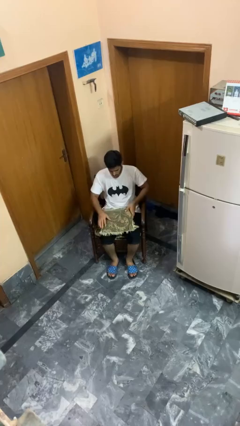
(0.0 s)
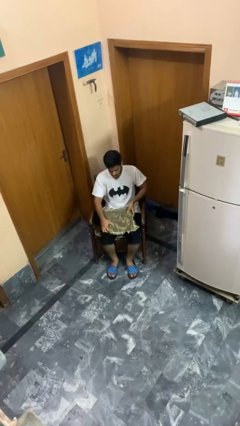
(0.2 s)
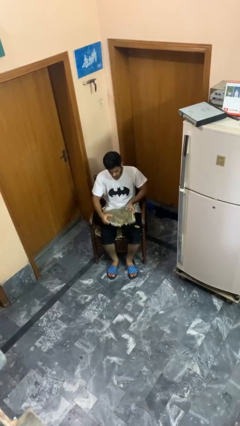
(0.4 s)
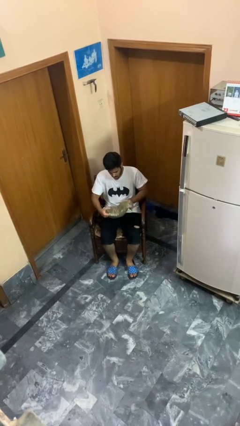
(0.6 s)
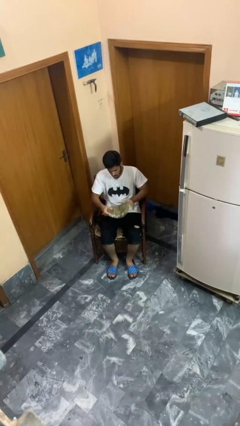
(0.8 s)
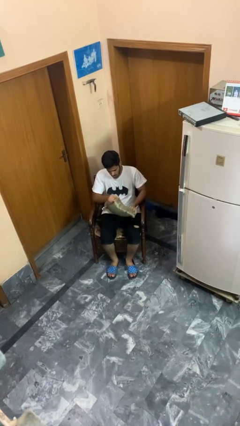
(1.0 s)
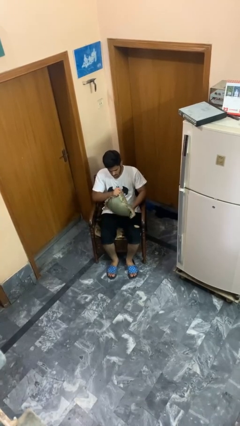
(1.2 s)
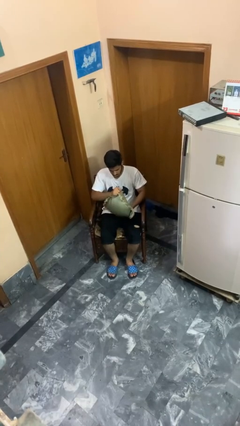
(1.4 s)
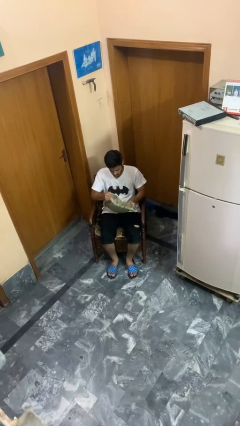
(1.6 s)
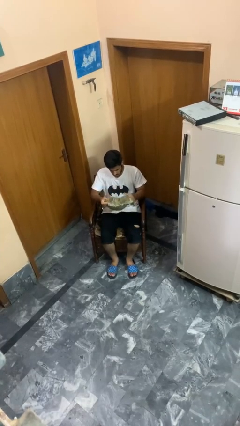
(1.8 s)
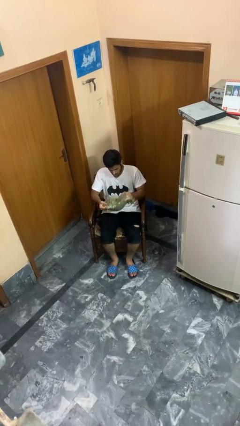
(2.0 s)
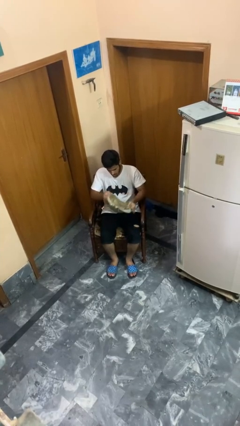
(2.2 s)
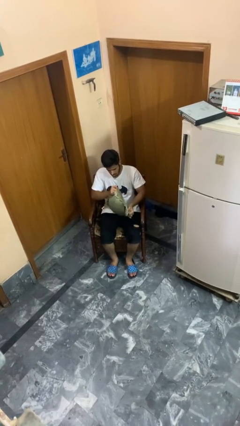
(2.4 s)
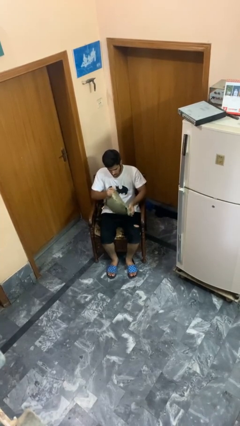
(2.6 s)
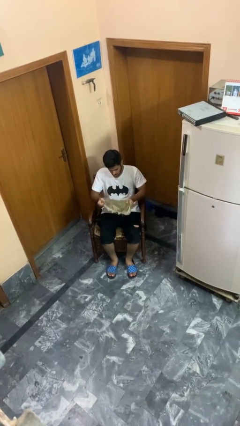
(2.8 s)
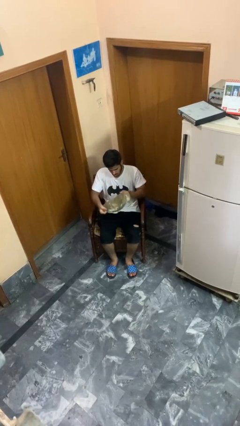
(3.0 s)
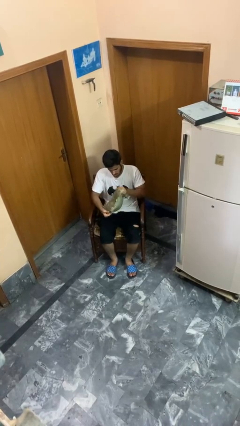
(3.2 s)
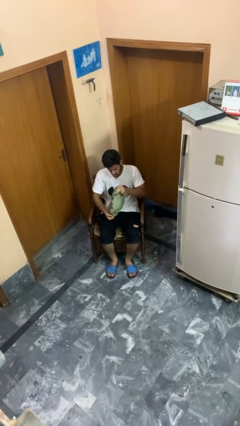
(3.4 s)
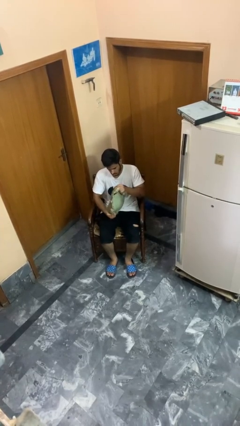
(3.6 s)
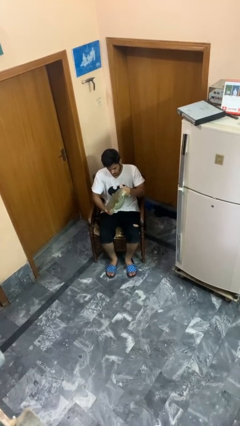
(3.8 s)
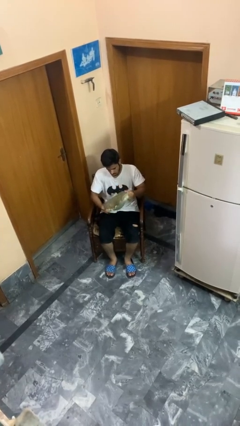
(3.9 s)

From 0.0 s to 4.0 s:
person squeezes object

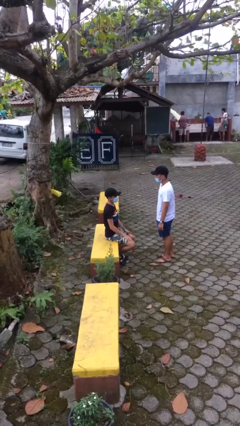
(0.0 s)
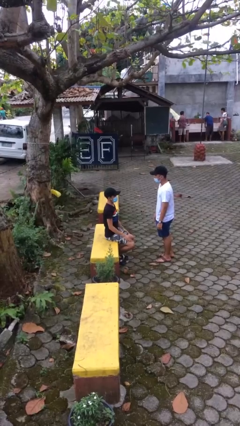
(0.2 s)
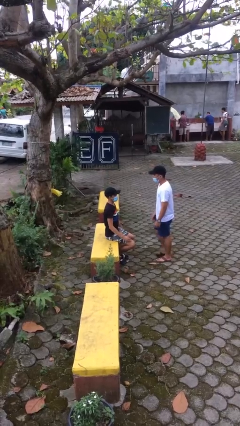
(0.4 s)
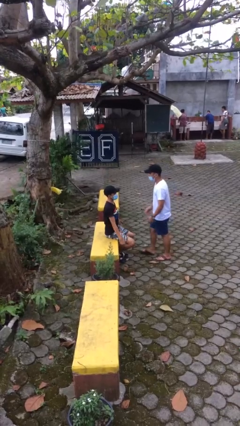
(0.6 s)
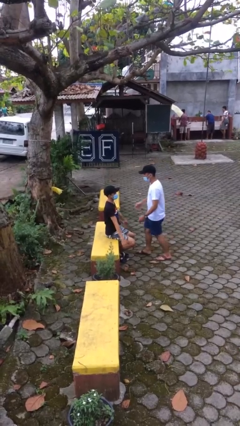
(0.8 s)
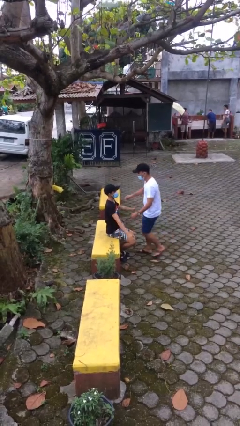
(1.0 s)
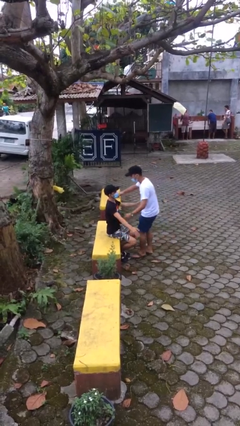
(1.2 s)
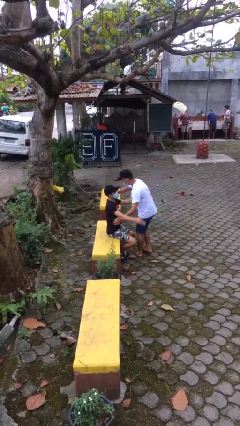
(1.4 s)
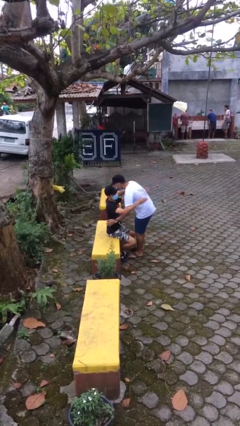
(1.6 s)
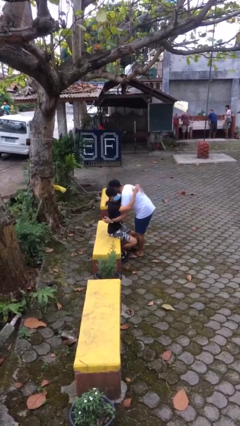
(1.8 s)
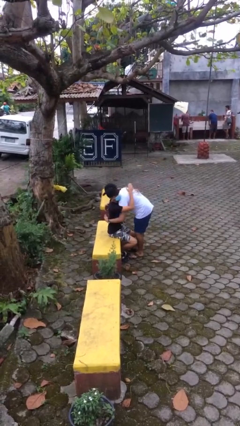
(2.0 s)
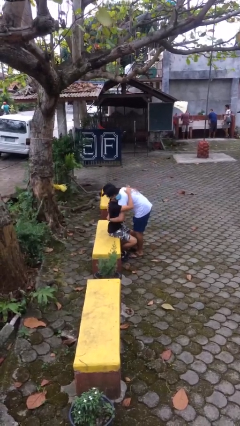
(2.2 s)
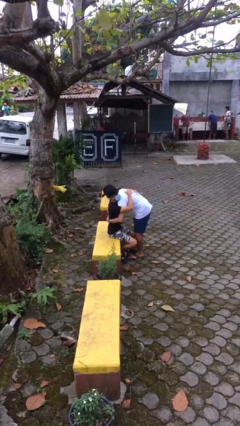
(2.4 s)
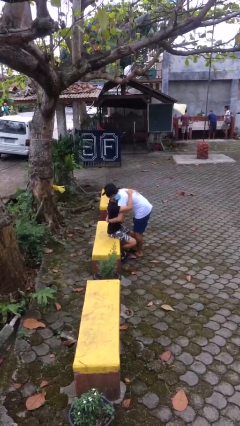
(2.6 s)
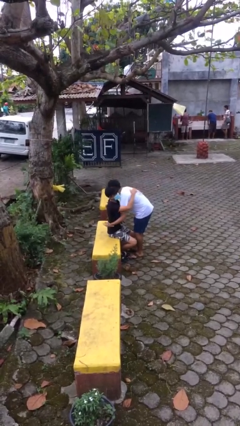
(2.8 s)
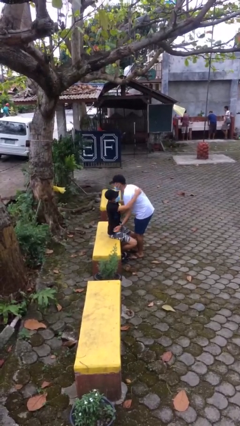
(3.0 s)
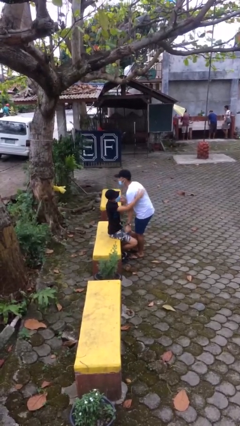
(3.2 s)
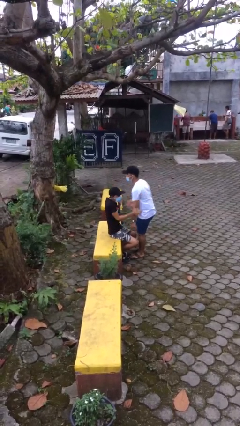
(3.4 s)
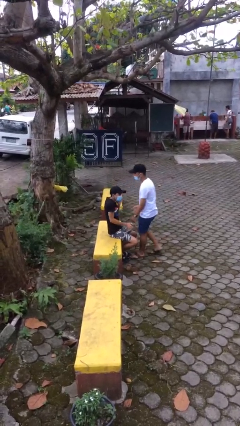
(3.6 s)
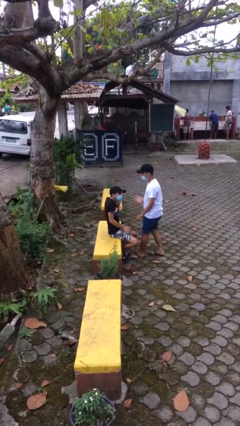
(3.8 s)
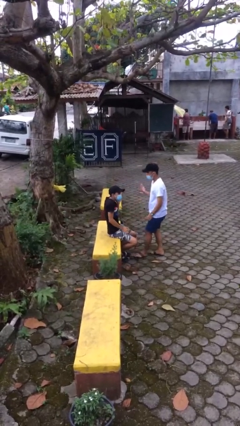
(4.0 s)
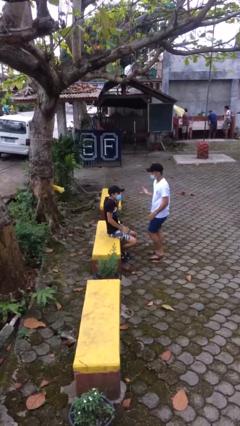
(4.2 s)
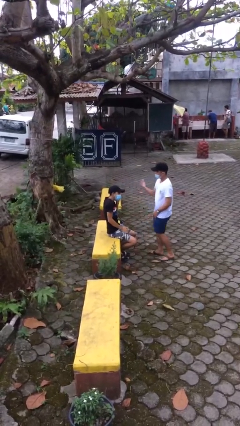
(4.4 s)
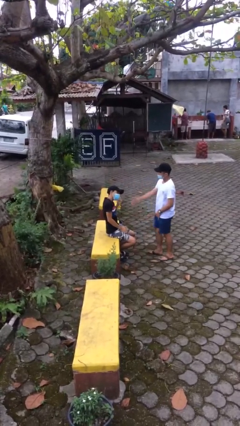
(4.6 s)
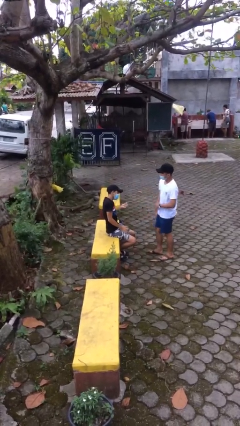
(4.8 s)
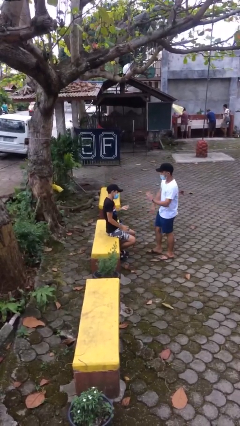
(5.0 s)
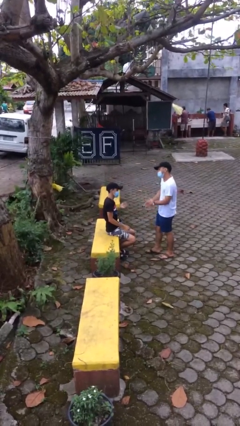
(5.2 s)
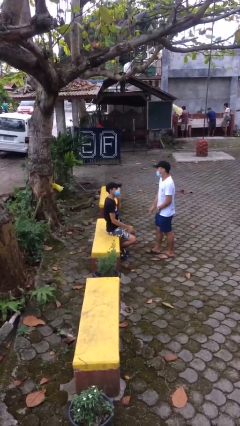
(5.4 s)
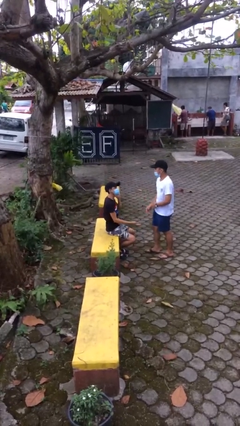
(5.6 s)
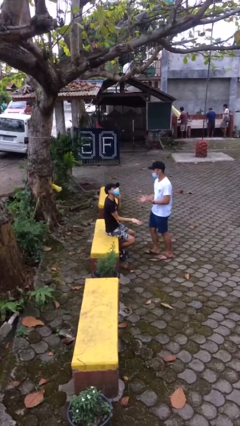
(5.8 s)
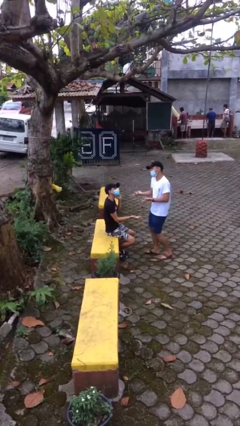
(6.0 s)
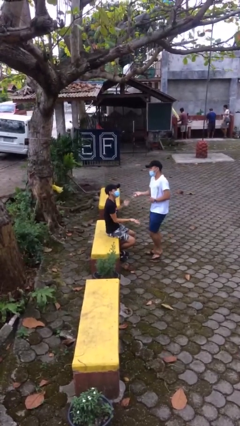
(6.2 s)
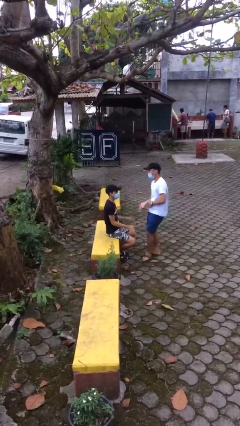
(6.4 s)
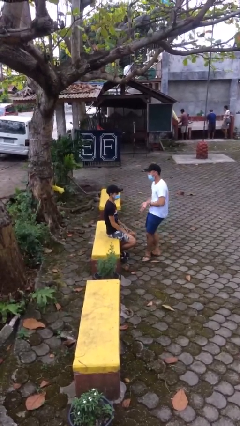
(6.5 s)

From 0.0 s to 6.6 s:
person embraces person

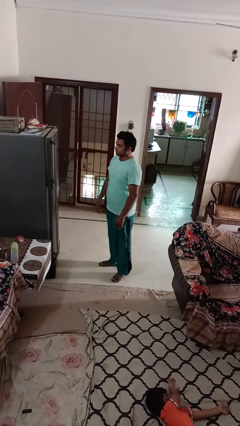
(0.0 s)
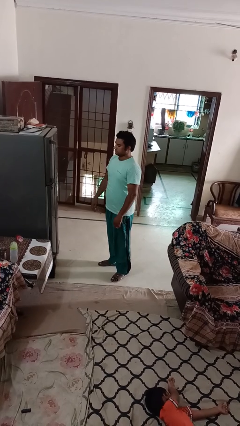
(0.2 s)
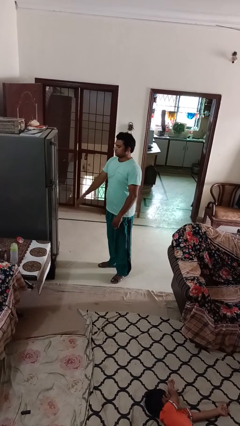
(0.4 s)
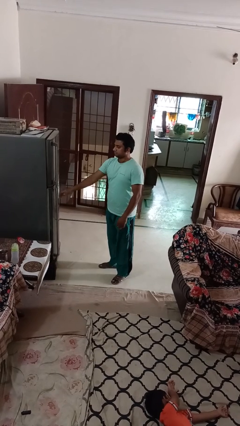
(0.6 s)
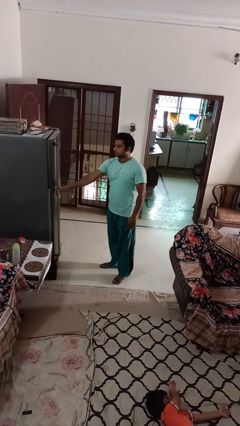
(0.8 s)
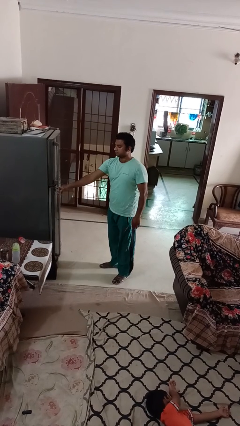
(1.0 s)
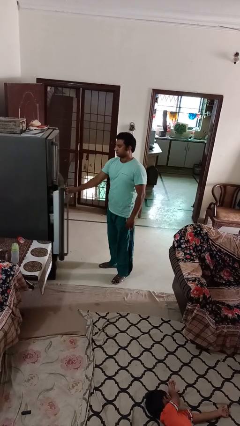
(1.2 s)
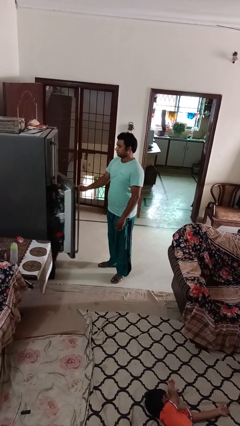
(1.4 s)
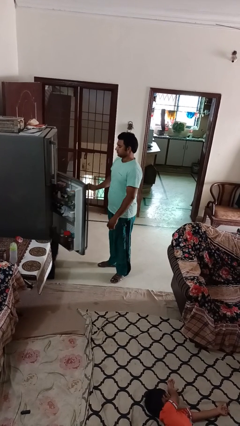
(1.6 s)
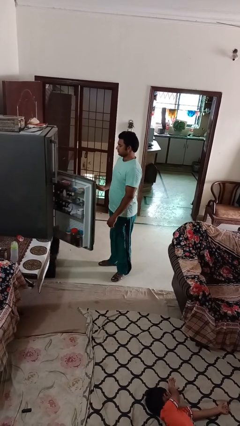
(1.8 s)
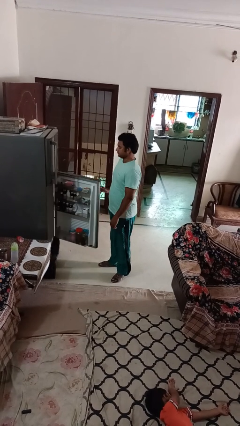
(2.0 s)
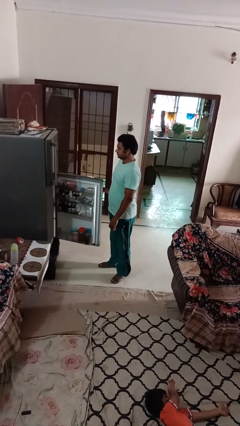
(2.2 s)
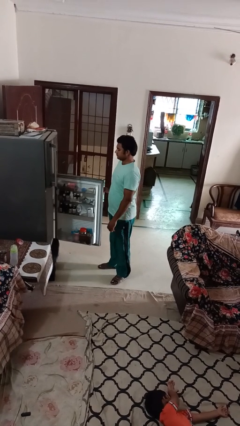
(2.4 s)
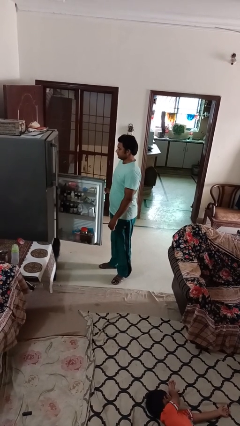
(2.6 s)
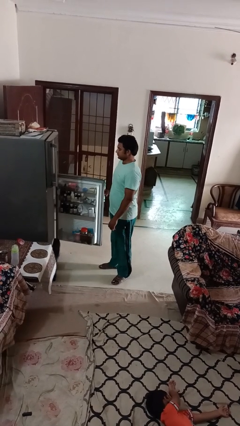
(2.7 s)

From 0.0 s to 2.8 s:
person opens refrigerator

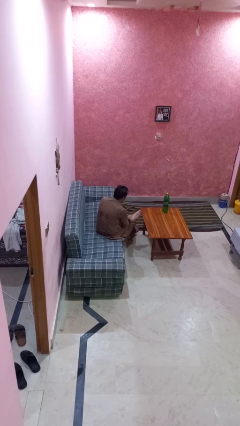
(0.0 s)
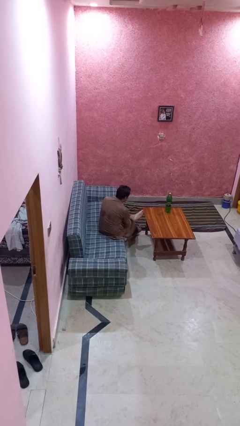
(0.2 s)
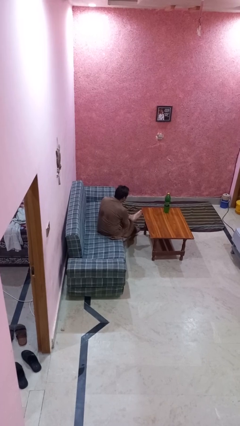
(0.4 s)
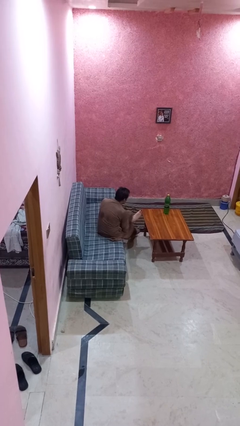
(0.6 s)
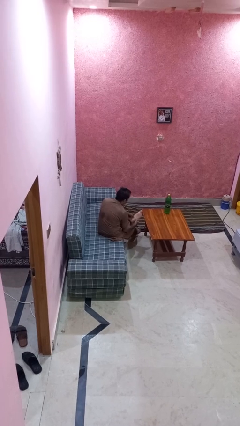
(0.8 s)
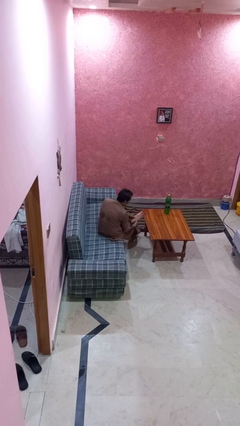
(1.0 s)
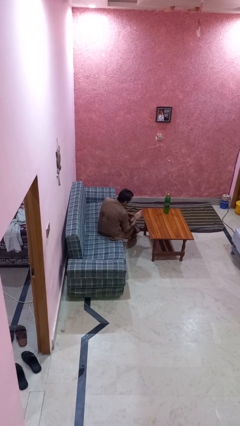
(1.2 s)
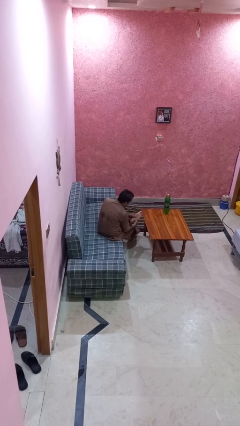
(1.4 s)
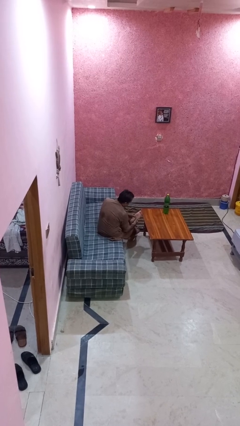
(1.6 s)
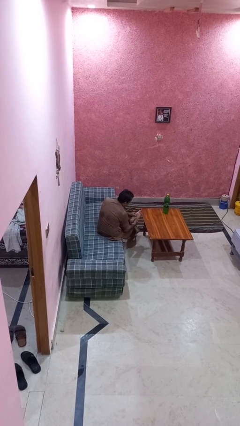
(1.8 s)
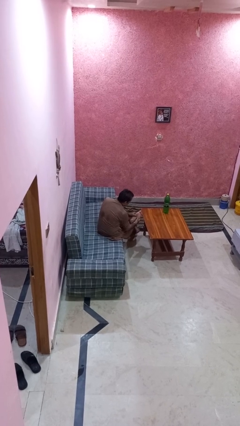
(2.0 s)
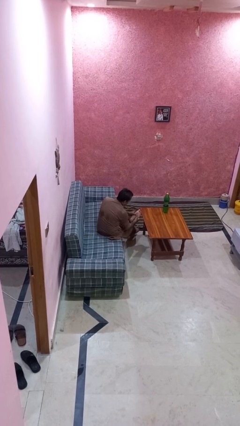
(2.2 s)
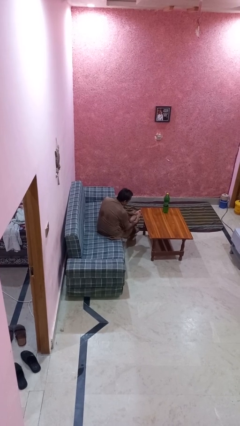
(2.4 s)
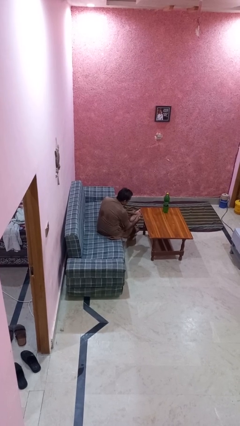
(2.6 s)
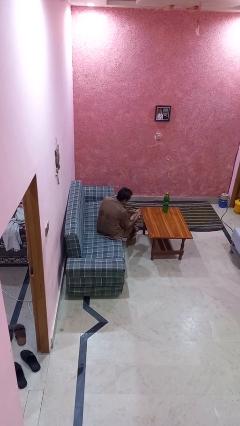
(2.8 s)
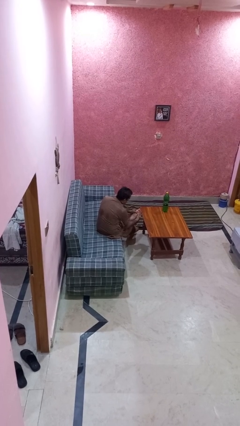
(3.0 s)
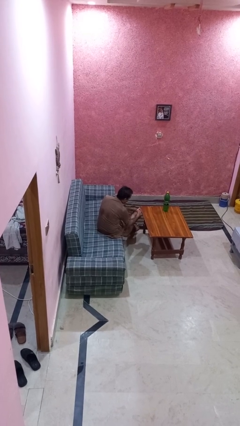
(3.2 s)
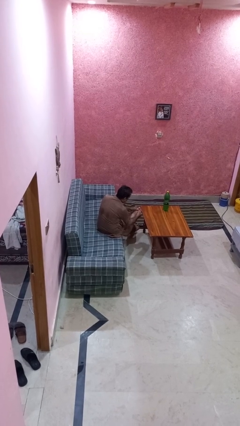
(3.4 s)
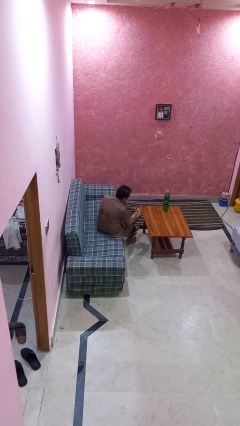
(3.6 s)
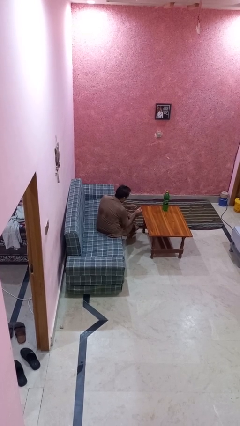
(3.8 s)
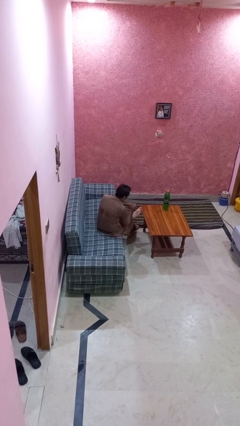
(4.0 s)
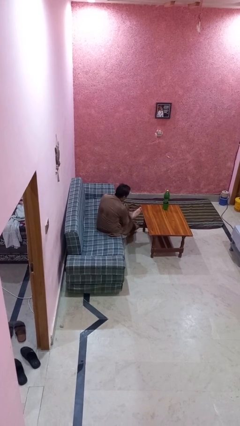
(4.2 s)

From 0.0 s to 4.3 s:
person rubs foot
